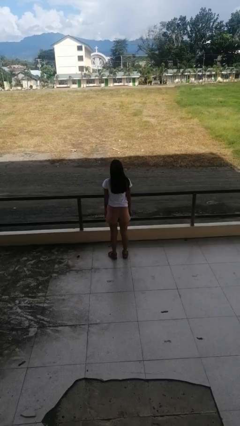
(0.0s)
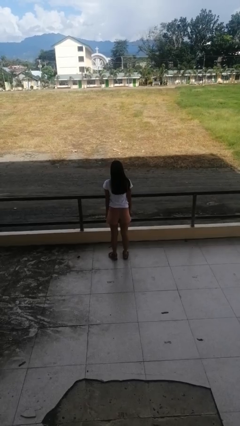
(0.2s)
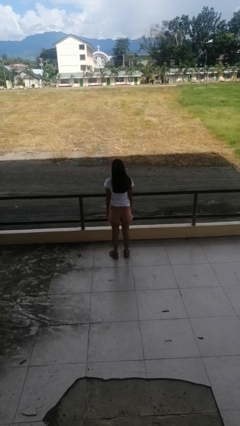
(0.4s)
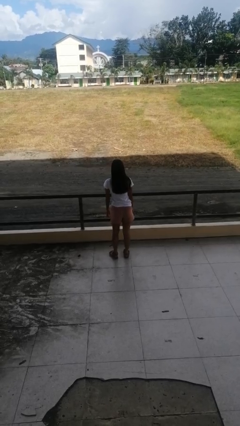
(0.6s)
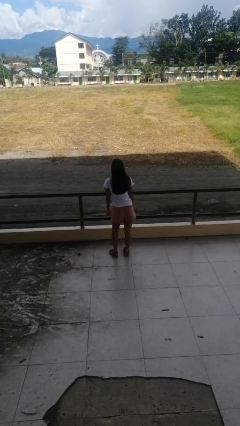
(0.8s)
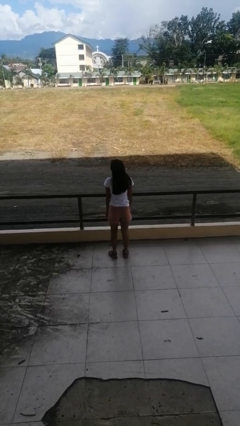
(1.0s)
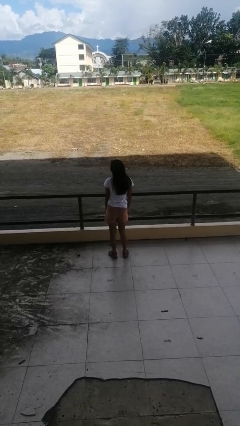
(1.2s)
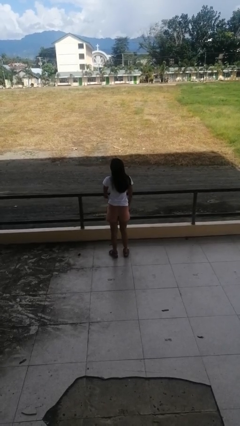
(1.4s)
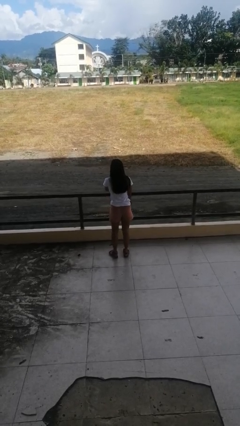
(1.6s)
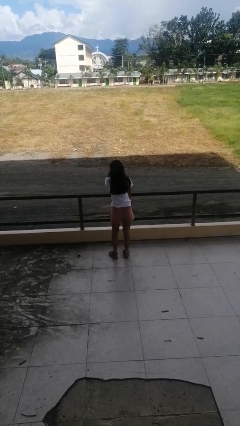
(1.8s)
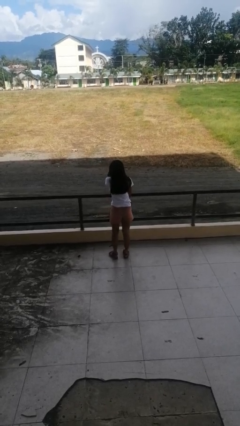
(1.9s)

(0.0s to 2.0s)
person wiggles hips

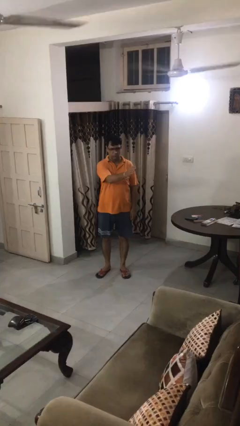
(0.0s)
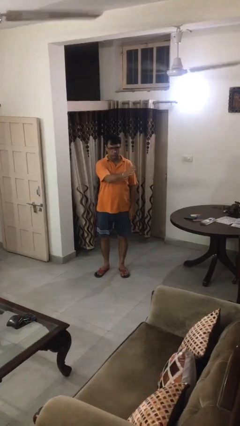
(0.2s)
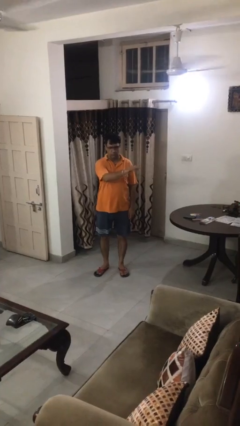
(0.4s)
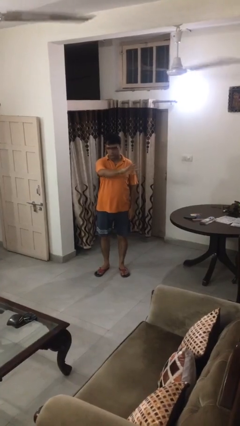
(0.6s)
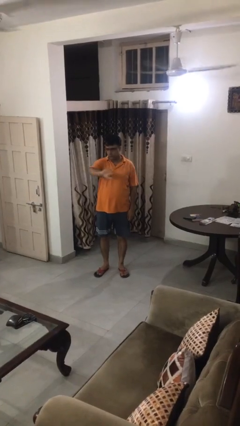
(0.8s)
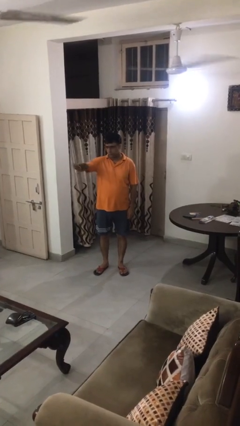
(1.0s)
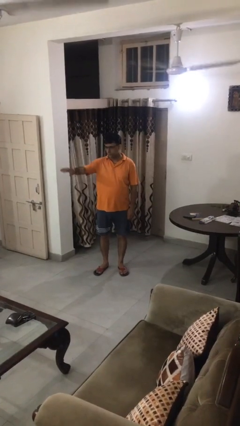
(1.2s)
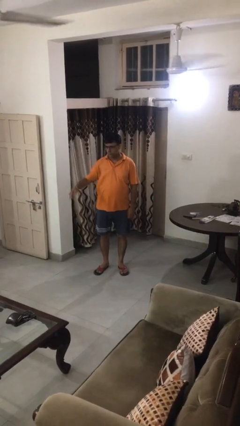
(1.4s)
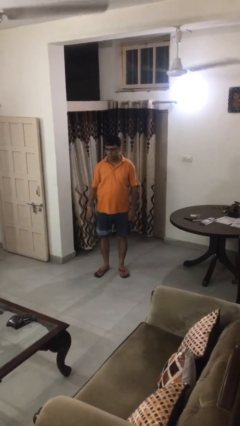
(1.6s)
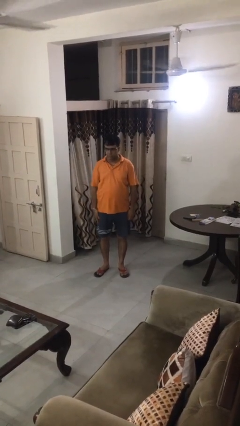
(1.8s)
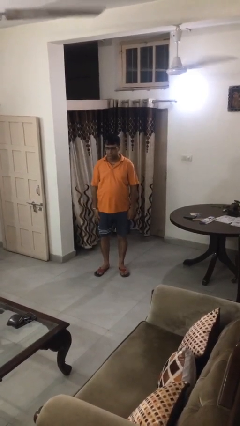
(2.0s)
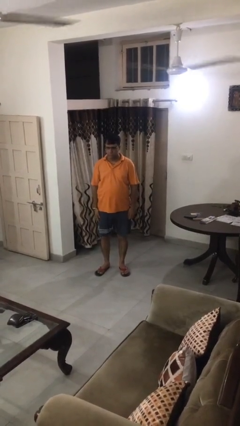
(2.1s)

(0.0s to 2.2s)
person gestures swipe right

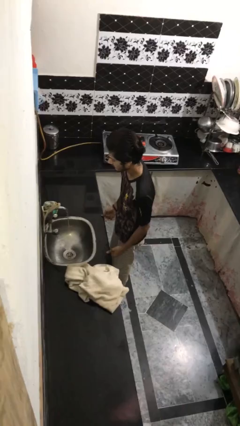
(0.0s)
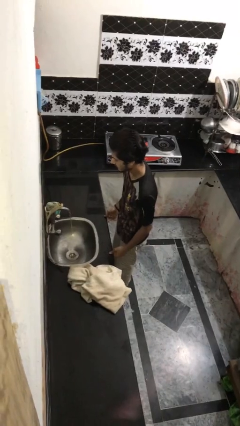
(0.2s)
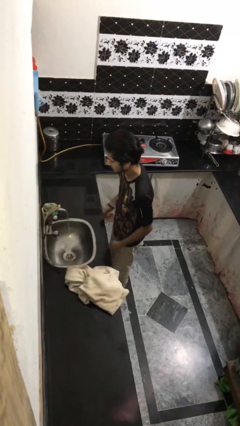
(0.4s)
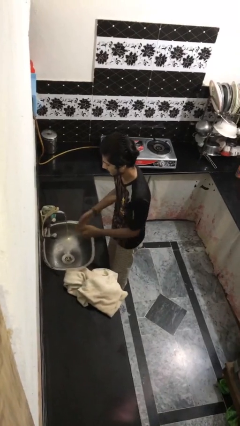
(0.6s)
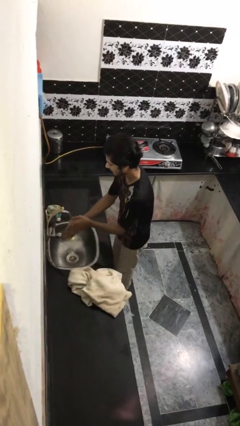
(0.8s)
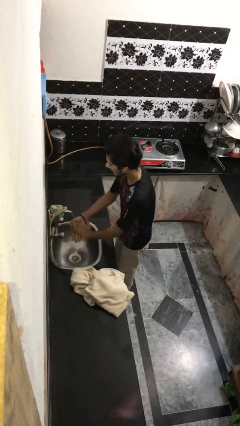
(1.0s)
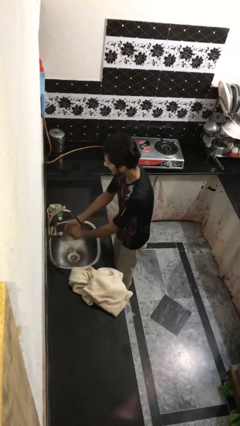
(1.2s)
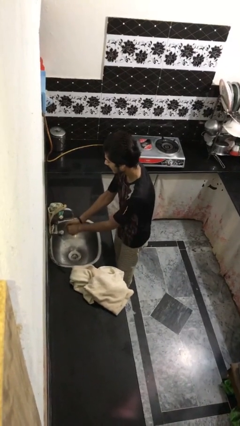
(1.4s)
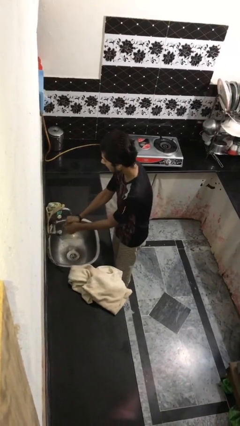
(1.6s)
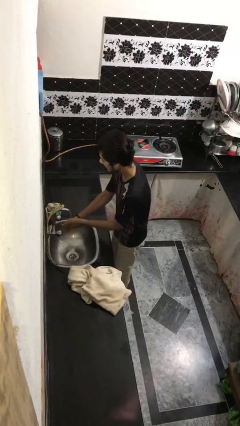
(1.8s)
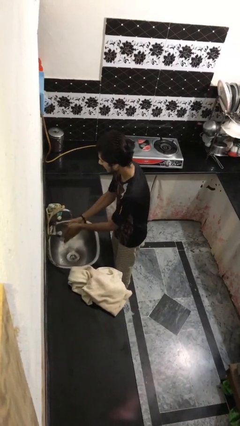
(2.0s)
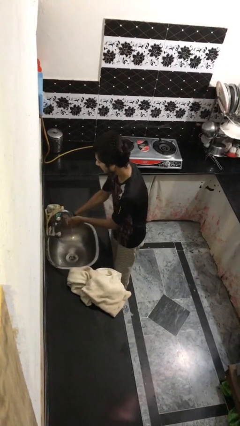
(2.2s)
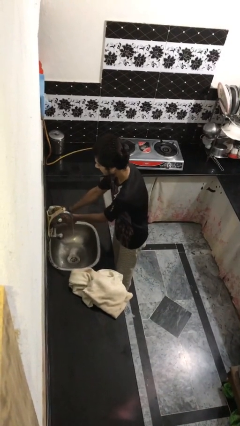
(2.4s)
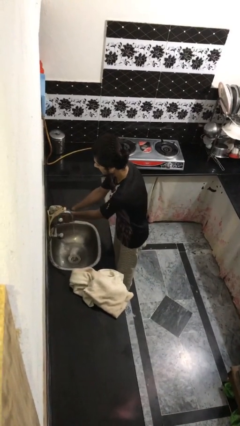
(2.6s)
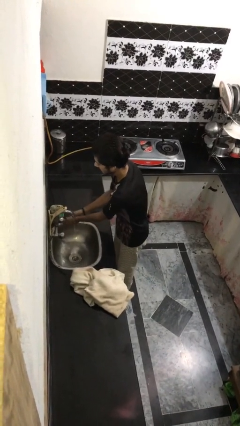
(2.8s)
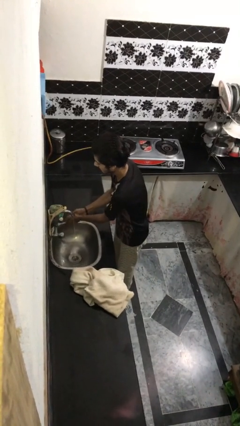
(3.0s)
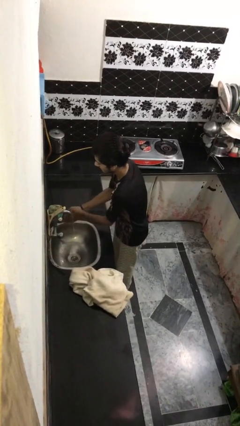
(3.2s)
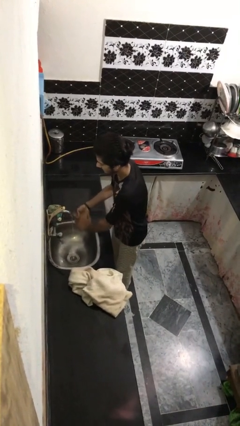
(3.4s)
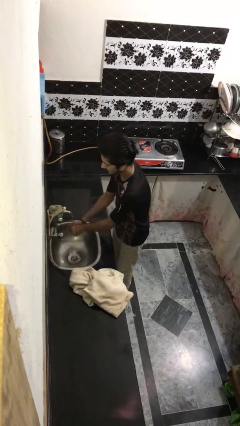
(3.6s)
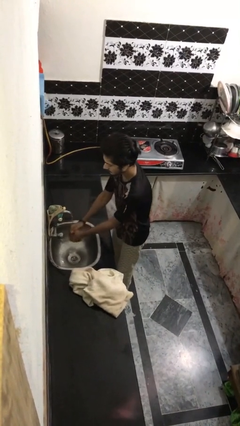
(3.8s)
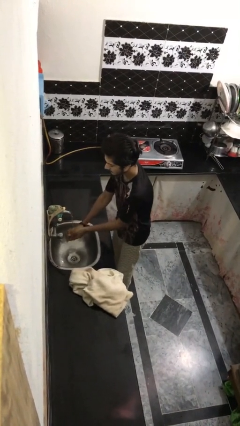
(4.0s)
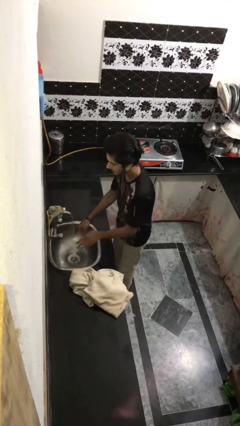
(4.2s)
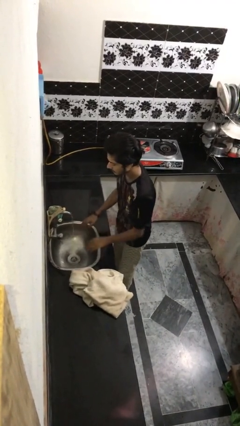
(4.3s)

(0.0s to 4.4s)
person washes face

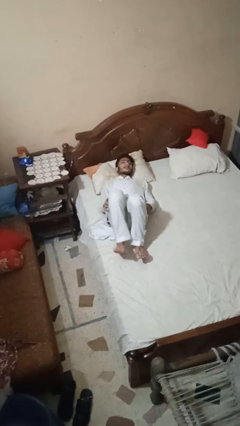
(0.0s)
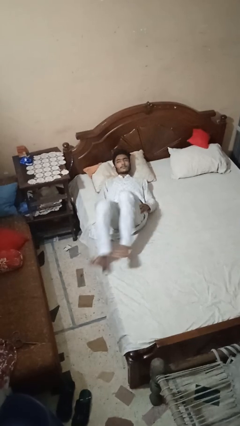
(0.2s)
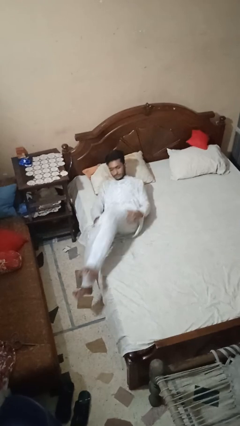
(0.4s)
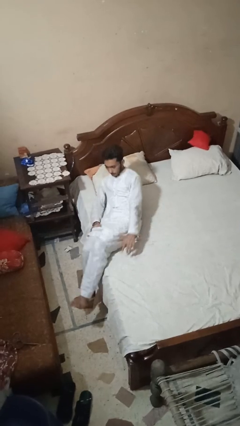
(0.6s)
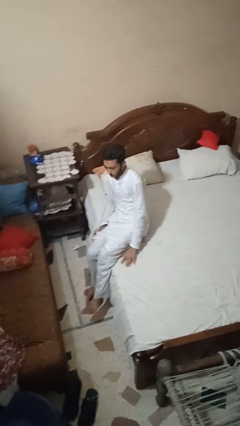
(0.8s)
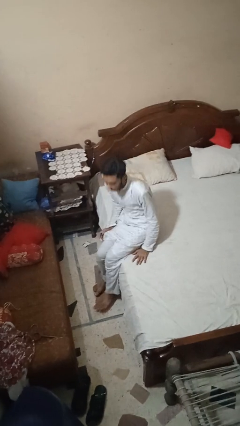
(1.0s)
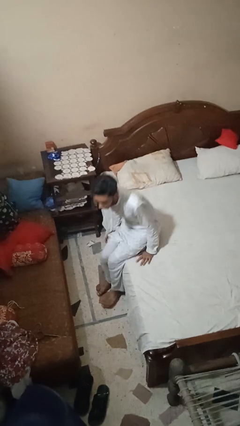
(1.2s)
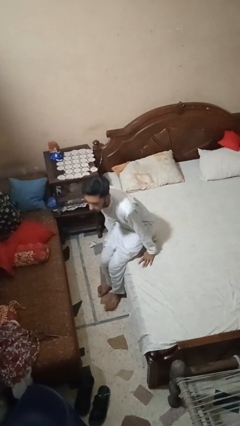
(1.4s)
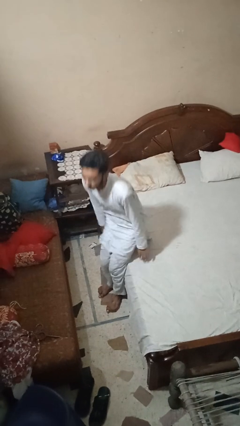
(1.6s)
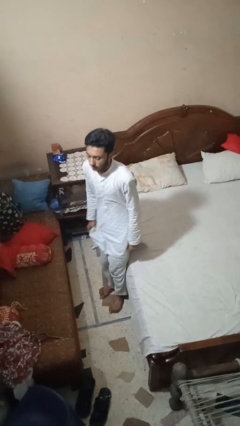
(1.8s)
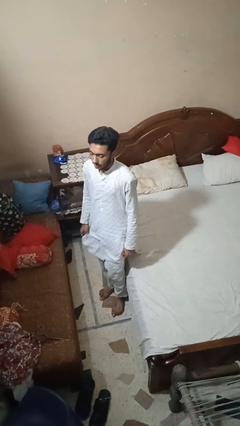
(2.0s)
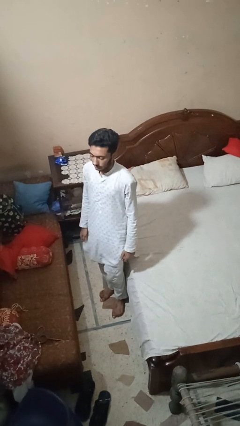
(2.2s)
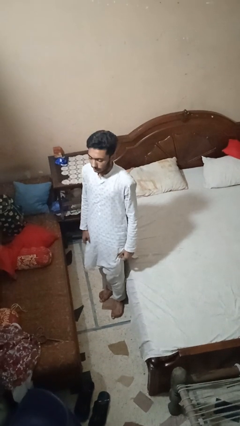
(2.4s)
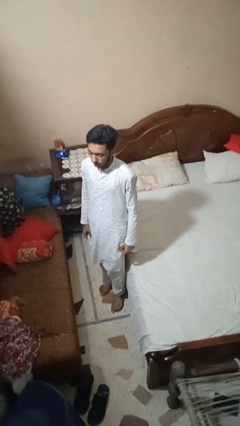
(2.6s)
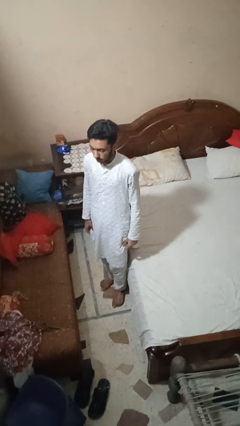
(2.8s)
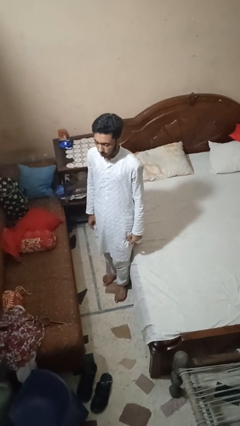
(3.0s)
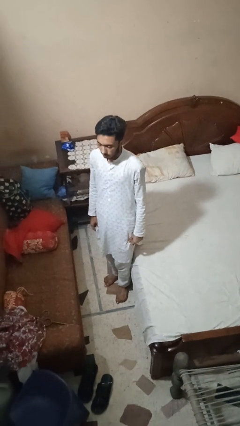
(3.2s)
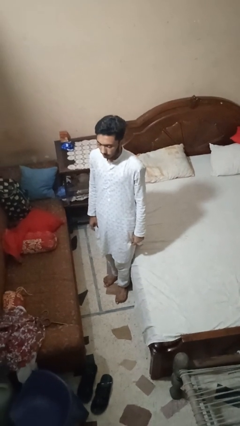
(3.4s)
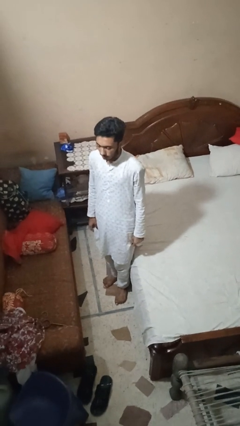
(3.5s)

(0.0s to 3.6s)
person stands up

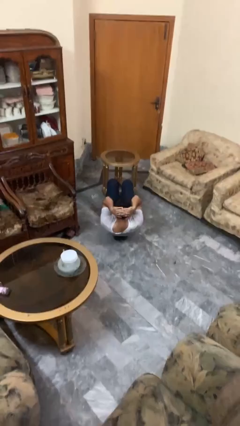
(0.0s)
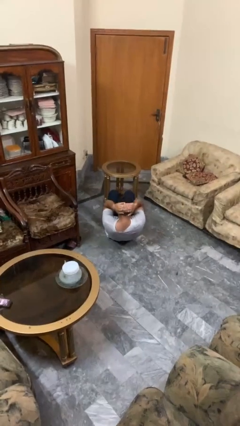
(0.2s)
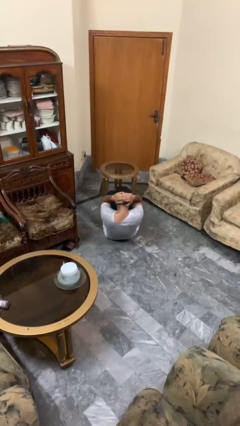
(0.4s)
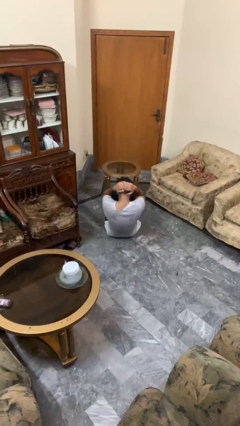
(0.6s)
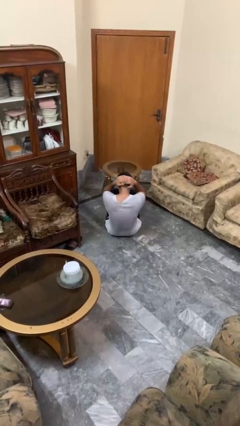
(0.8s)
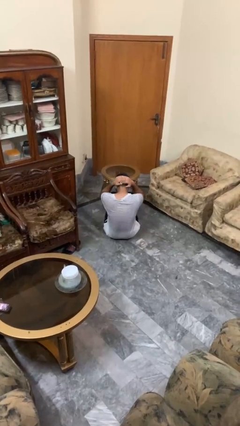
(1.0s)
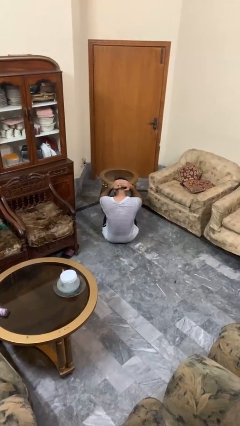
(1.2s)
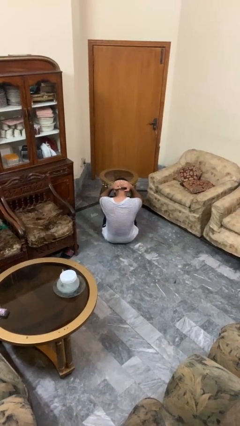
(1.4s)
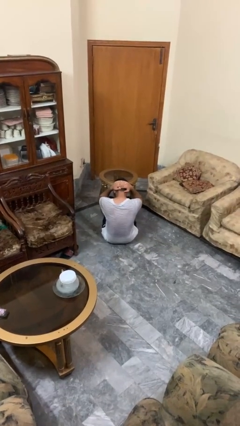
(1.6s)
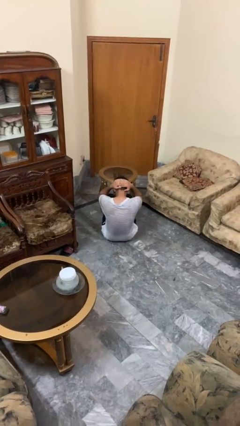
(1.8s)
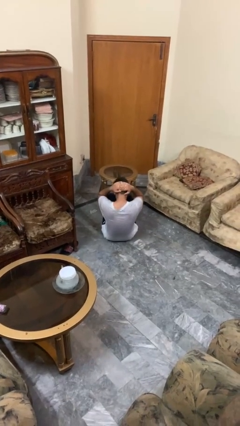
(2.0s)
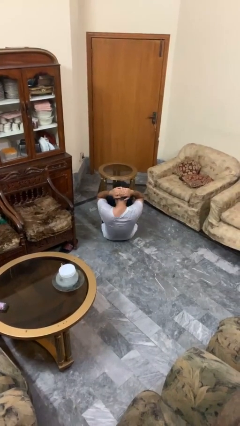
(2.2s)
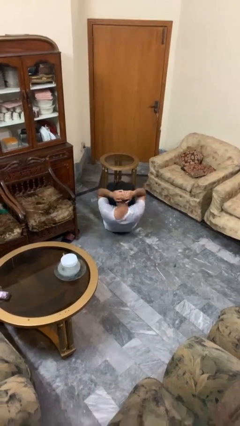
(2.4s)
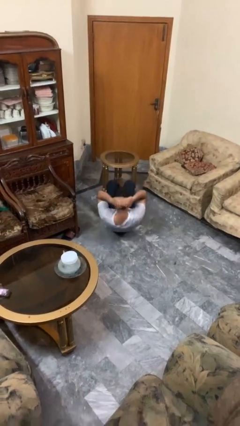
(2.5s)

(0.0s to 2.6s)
person exercises with situp

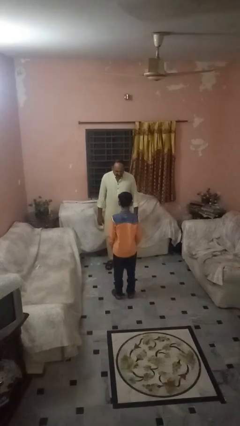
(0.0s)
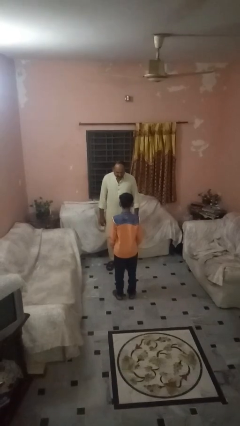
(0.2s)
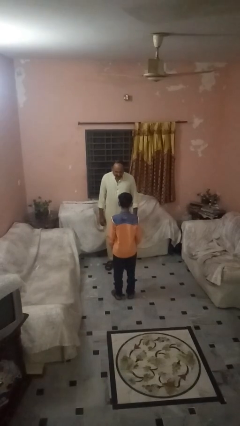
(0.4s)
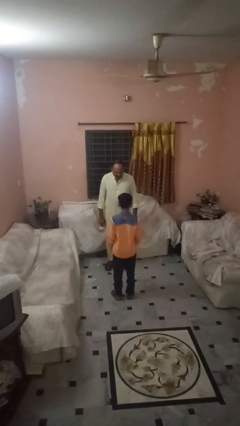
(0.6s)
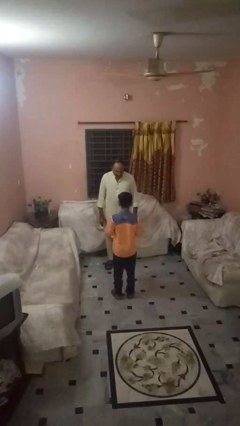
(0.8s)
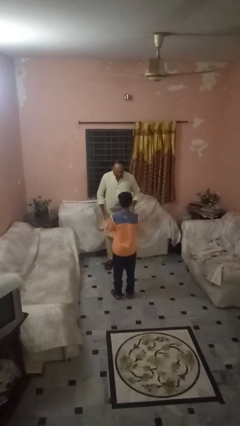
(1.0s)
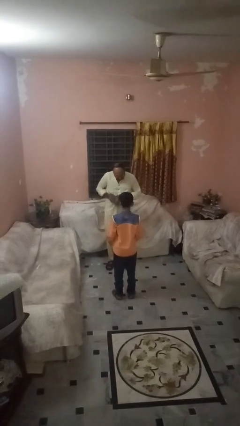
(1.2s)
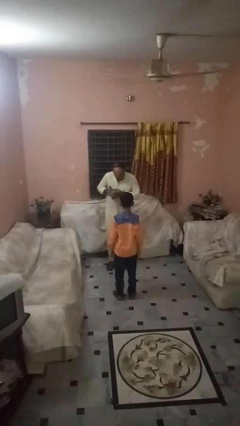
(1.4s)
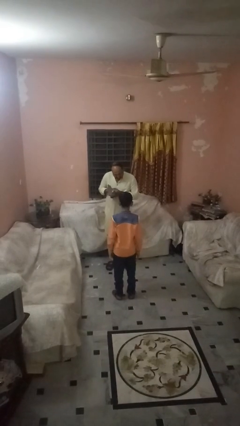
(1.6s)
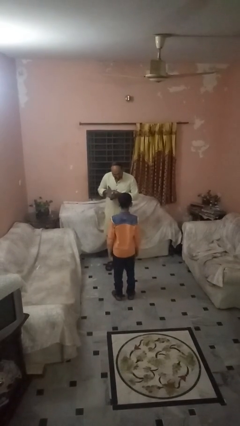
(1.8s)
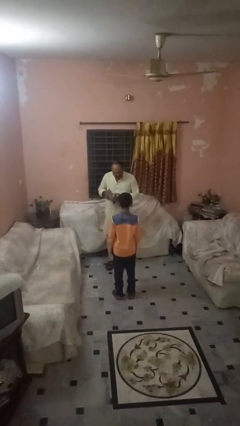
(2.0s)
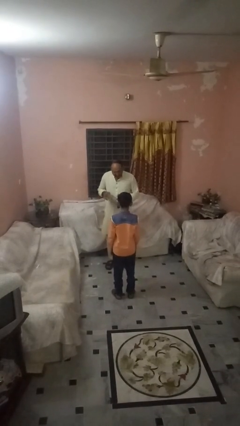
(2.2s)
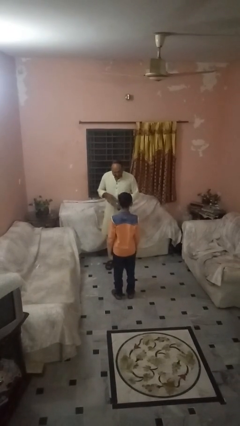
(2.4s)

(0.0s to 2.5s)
person catches object from person
